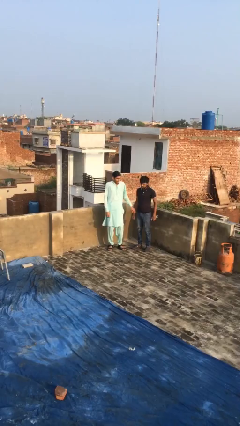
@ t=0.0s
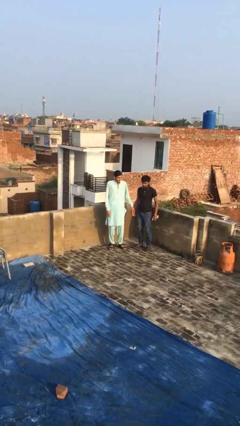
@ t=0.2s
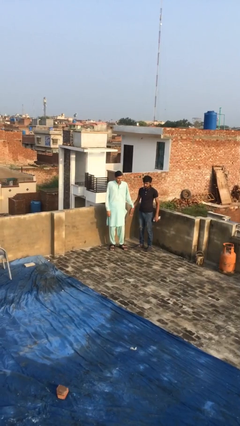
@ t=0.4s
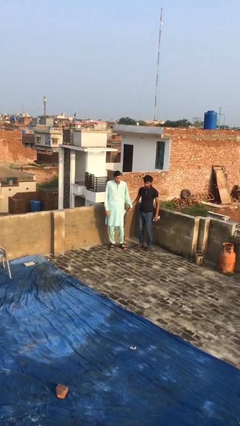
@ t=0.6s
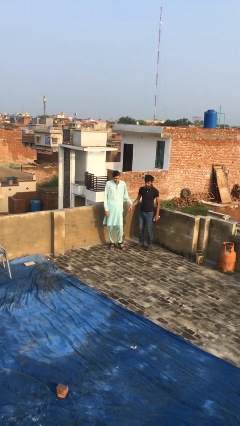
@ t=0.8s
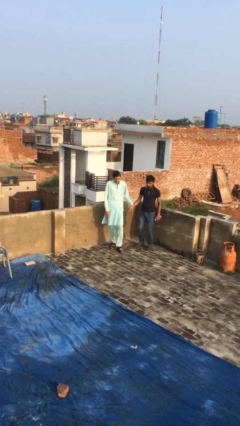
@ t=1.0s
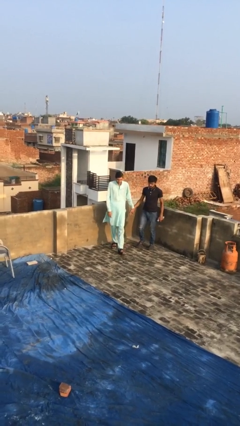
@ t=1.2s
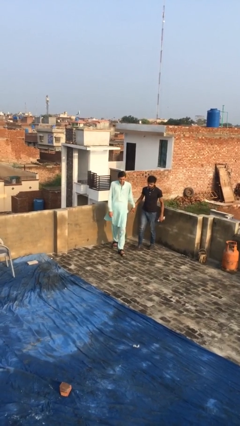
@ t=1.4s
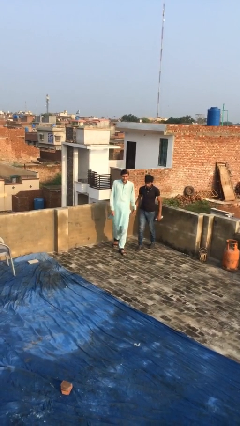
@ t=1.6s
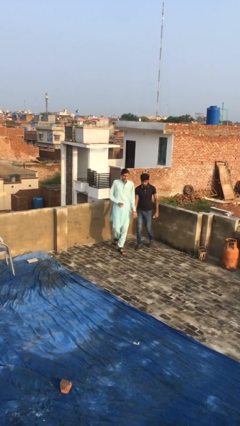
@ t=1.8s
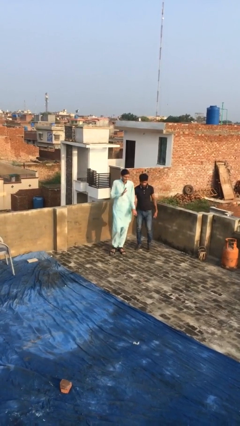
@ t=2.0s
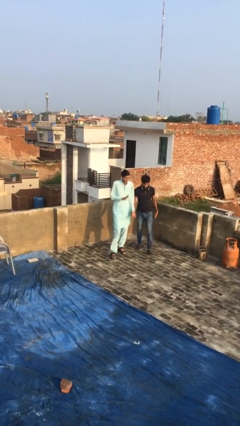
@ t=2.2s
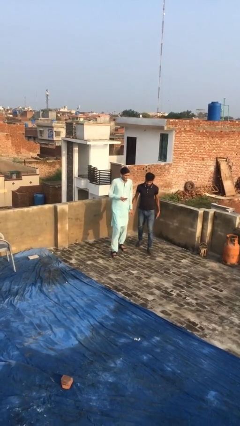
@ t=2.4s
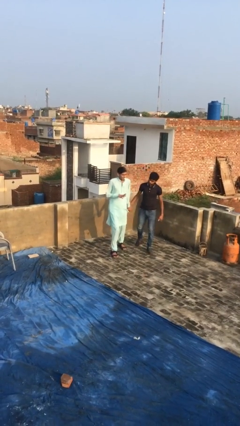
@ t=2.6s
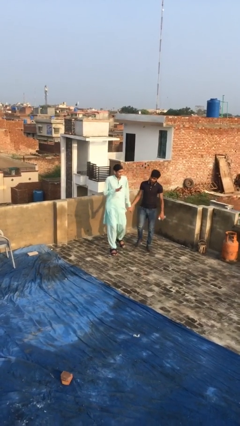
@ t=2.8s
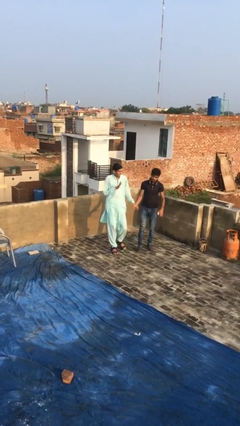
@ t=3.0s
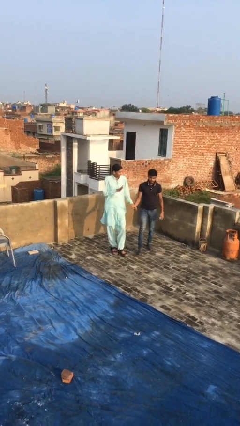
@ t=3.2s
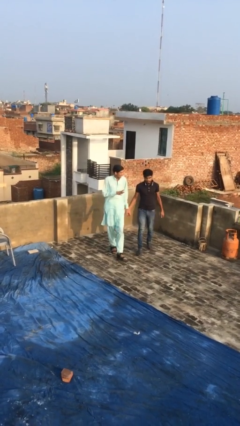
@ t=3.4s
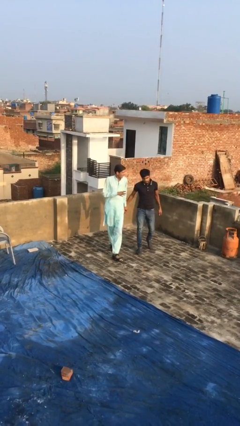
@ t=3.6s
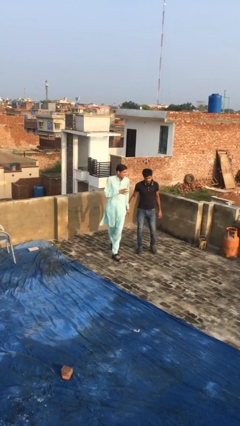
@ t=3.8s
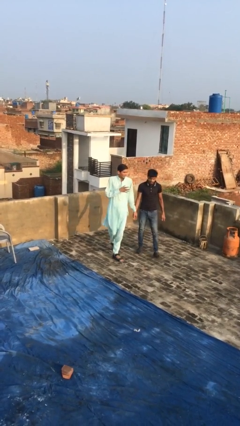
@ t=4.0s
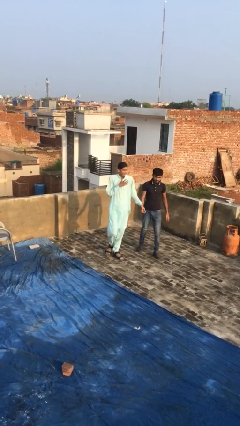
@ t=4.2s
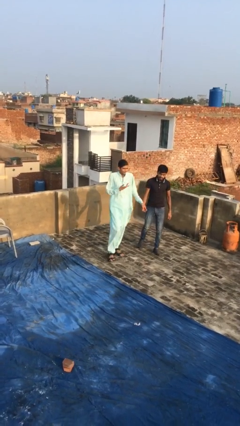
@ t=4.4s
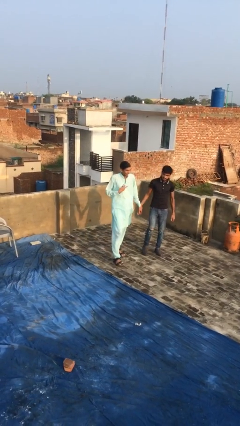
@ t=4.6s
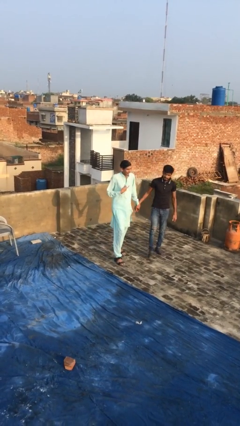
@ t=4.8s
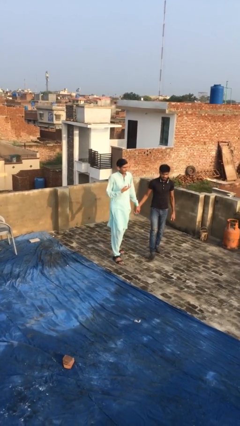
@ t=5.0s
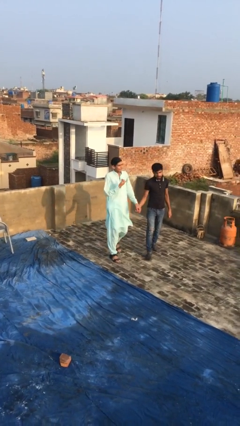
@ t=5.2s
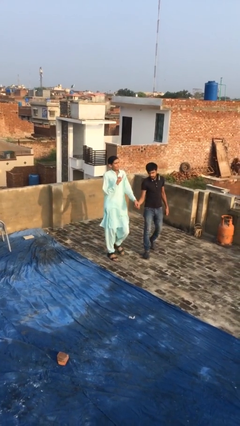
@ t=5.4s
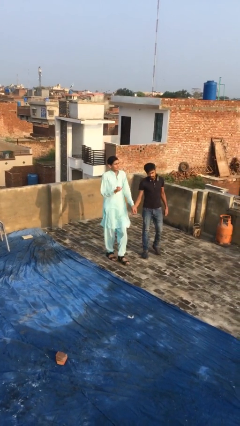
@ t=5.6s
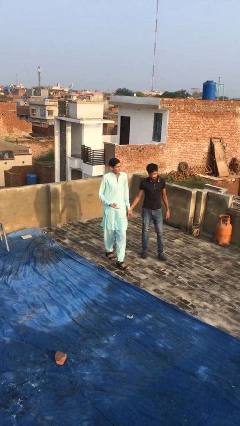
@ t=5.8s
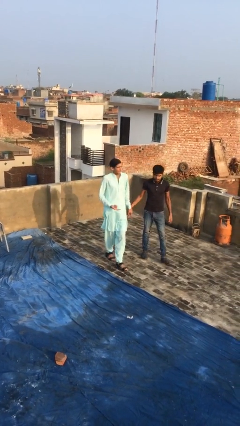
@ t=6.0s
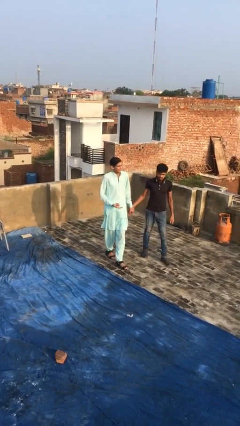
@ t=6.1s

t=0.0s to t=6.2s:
person holds hand

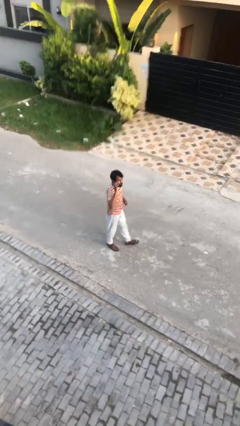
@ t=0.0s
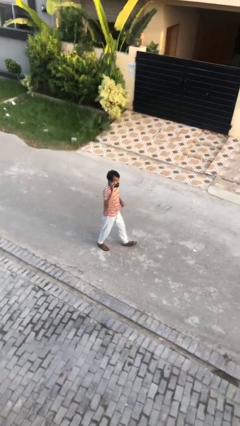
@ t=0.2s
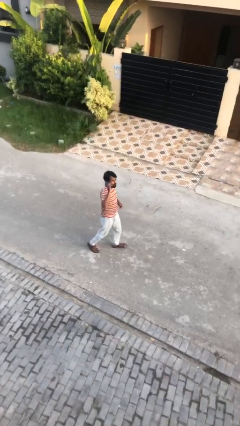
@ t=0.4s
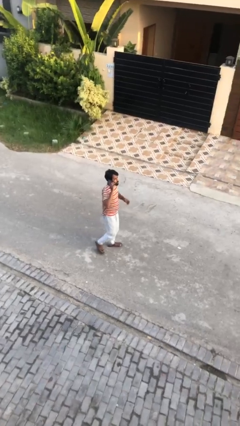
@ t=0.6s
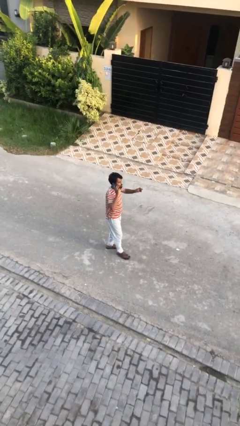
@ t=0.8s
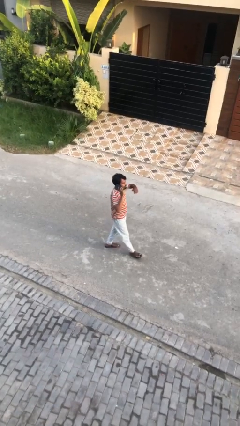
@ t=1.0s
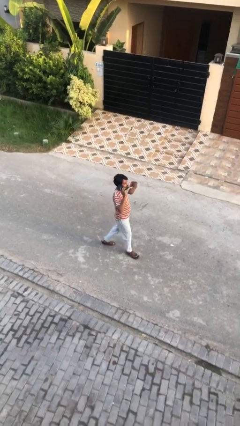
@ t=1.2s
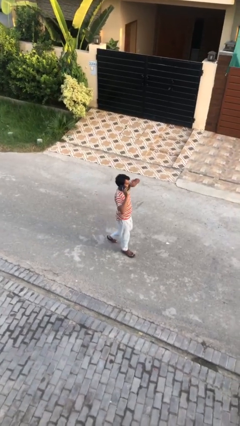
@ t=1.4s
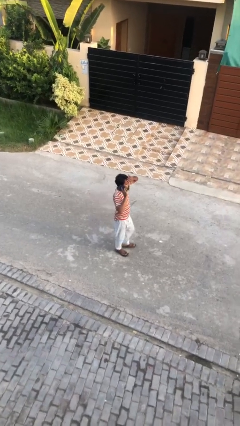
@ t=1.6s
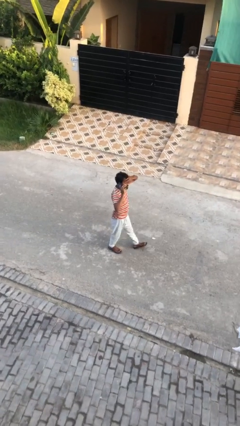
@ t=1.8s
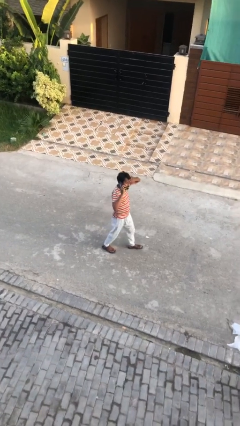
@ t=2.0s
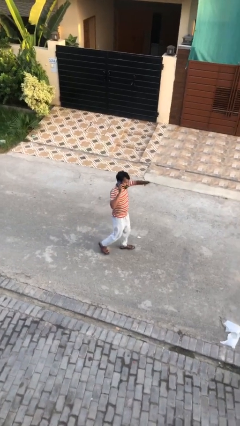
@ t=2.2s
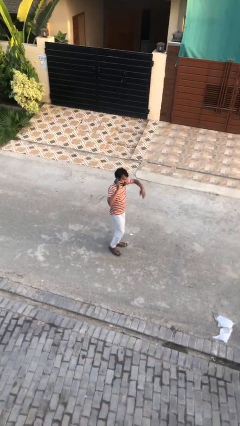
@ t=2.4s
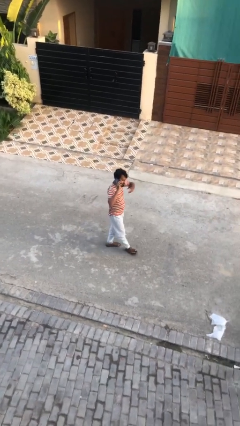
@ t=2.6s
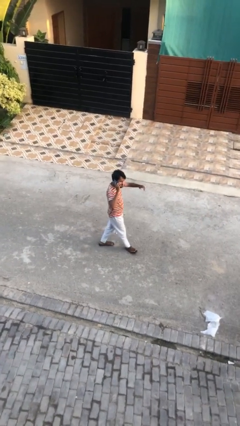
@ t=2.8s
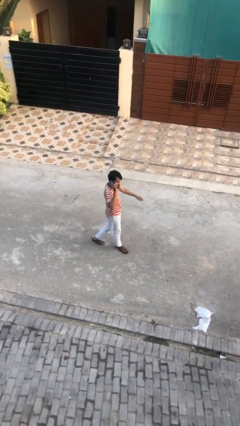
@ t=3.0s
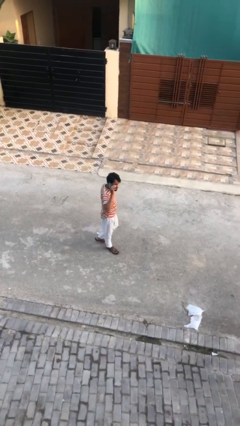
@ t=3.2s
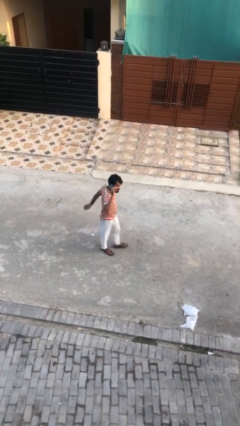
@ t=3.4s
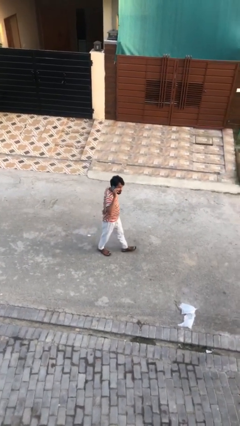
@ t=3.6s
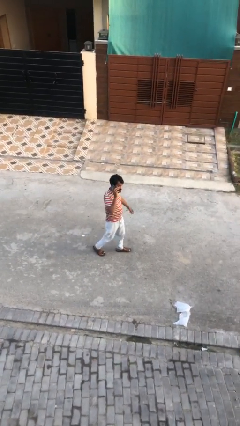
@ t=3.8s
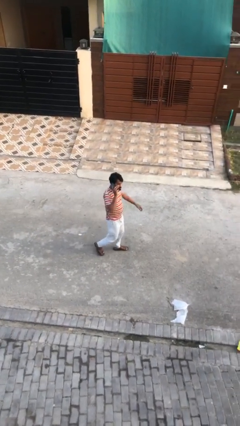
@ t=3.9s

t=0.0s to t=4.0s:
person talks on phone

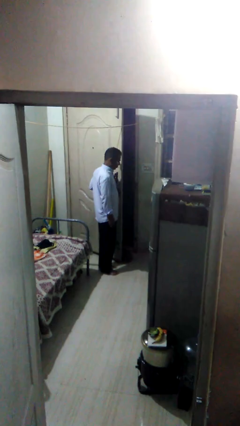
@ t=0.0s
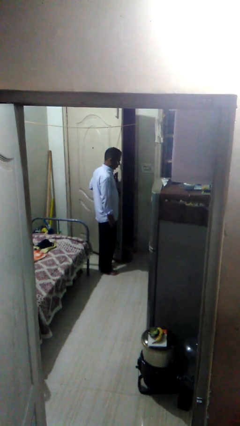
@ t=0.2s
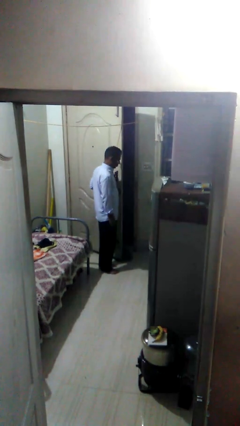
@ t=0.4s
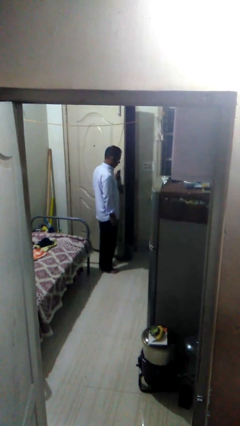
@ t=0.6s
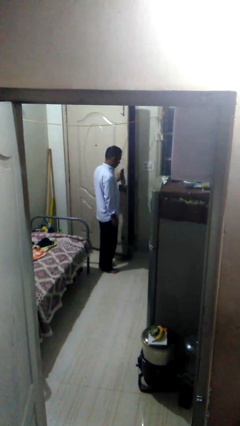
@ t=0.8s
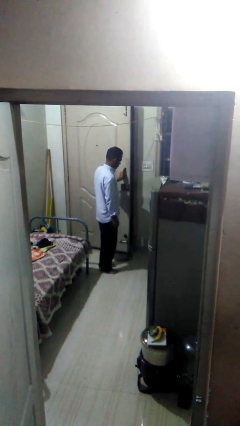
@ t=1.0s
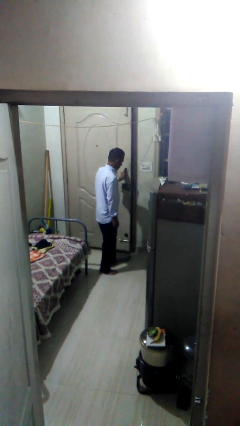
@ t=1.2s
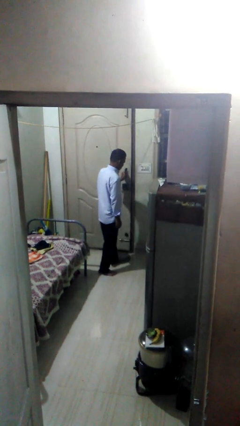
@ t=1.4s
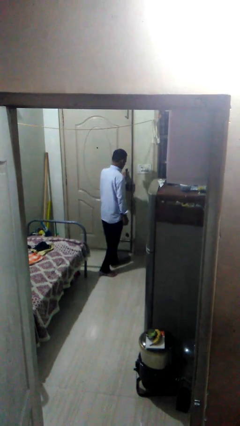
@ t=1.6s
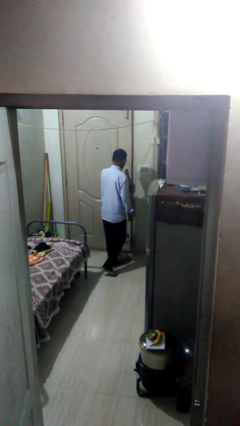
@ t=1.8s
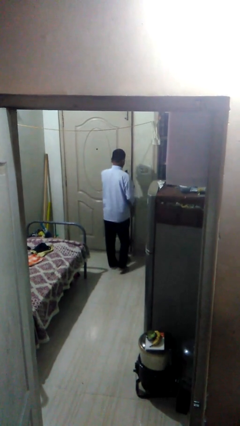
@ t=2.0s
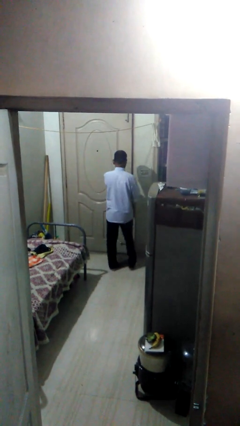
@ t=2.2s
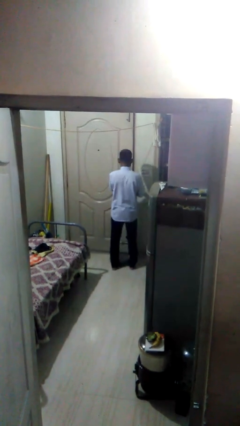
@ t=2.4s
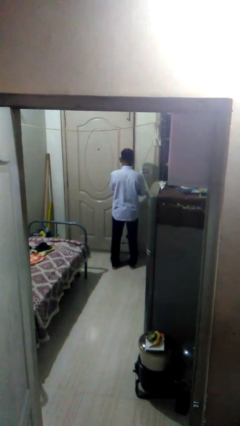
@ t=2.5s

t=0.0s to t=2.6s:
person closes facility door

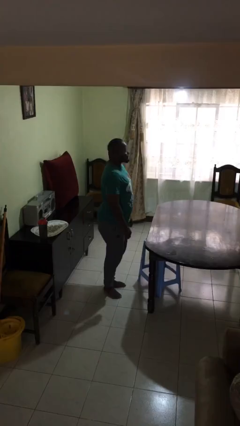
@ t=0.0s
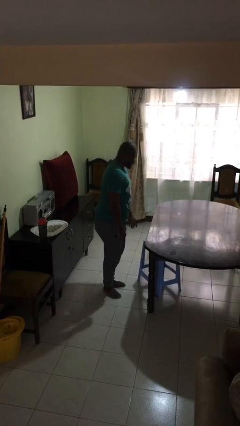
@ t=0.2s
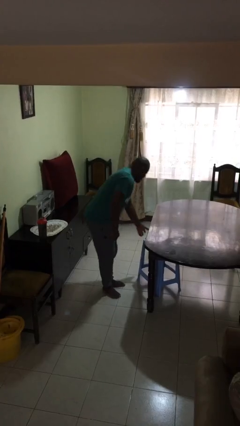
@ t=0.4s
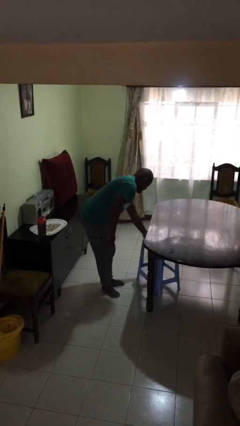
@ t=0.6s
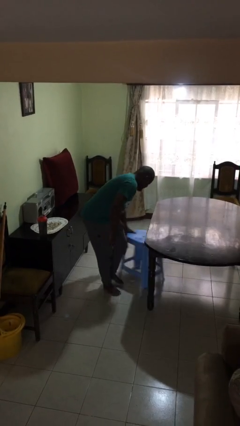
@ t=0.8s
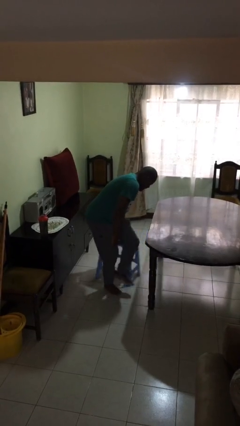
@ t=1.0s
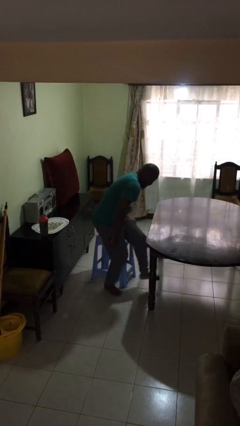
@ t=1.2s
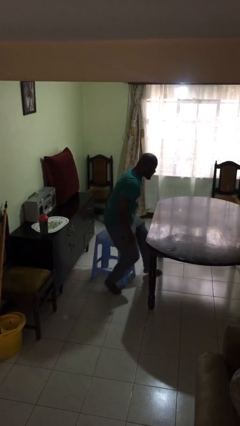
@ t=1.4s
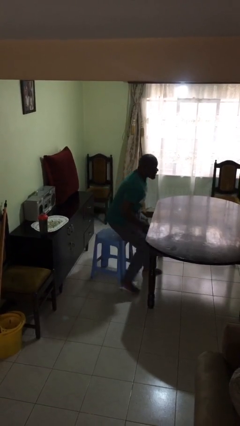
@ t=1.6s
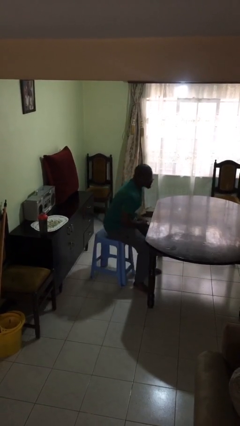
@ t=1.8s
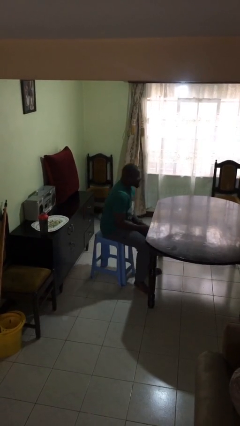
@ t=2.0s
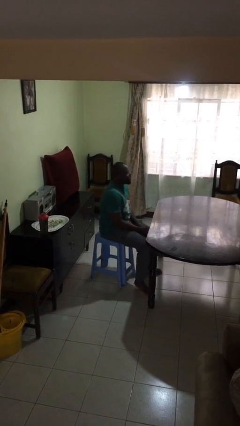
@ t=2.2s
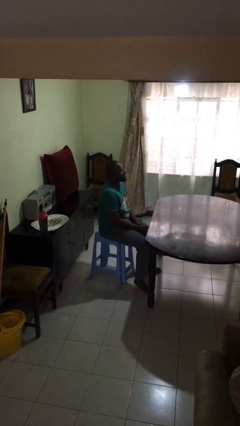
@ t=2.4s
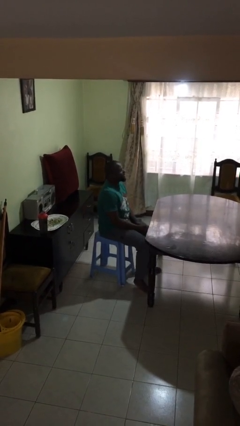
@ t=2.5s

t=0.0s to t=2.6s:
person sits down

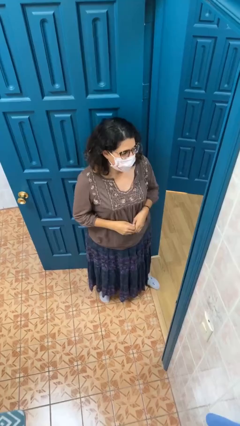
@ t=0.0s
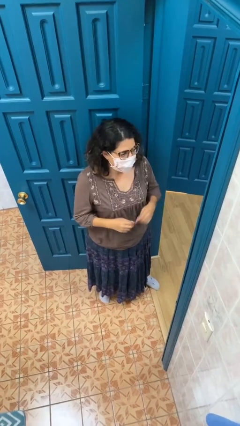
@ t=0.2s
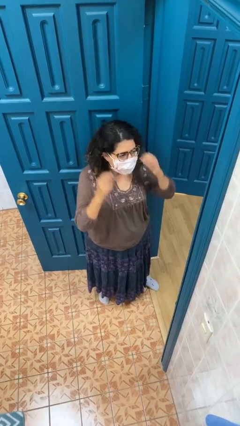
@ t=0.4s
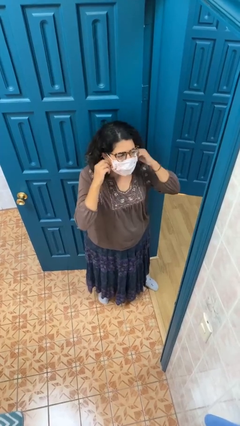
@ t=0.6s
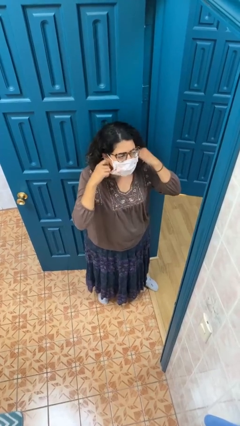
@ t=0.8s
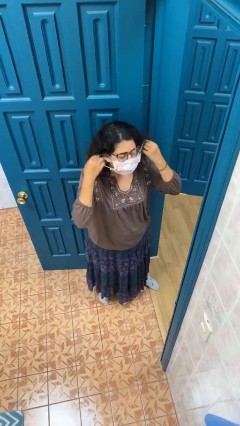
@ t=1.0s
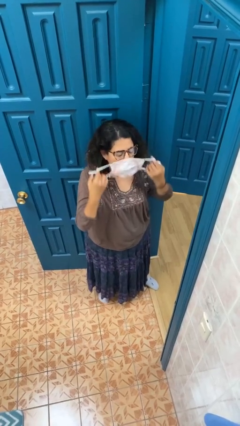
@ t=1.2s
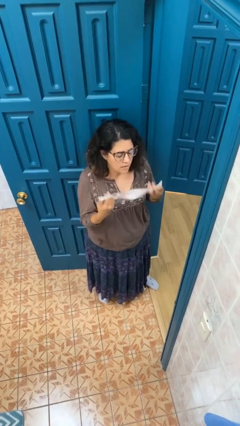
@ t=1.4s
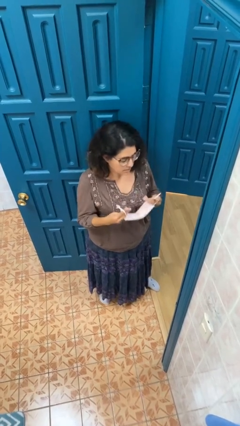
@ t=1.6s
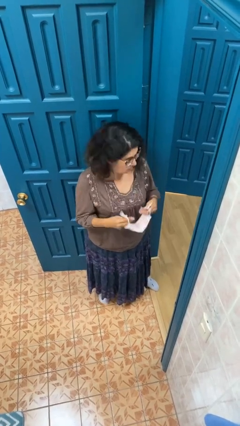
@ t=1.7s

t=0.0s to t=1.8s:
person takes off facemask

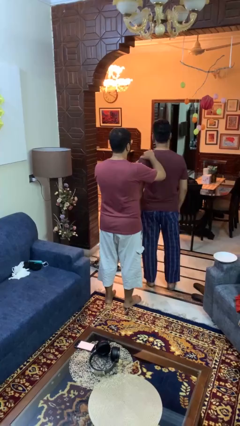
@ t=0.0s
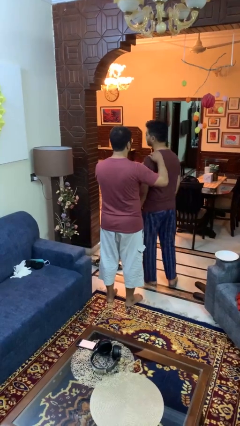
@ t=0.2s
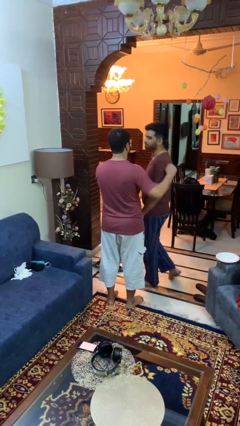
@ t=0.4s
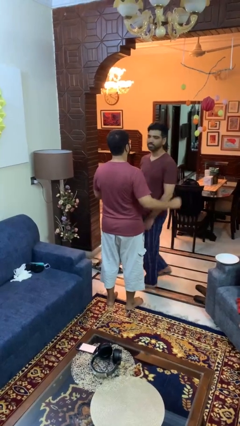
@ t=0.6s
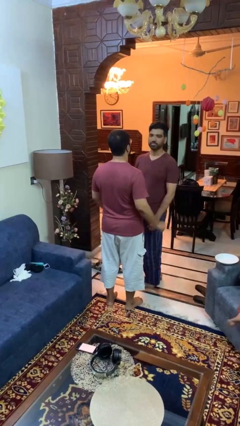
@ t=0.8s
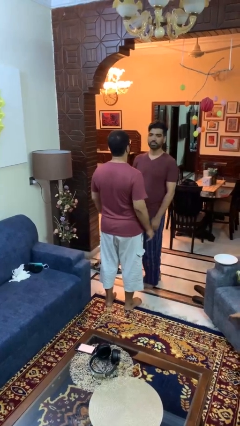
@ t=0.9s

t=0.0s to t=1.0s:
person spins person around
